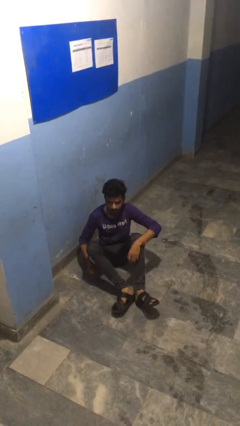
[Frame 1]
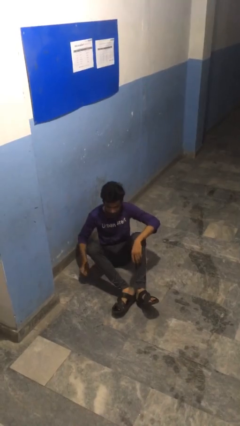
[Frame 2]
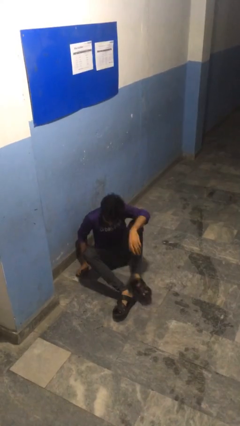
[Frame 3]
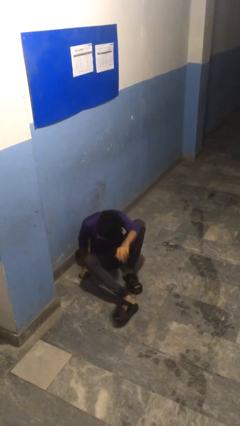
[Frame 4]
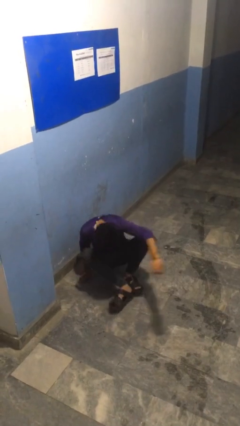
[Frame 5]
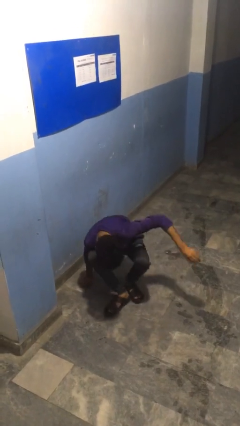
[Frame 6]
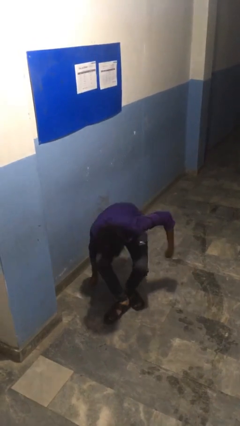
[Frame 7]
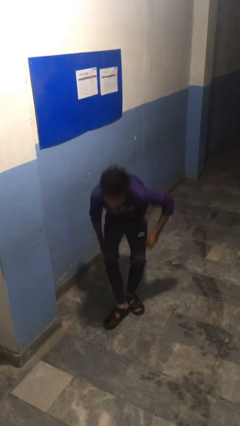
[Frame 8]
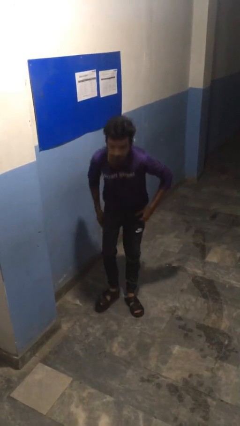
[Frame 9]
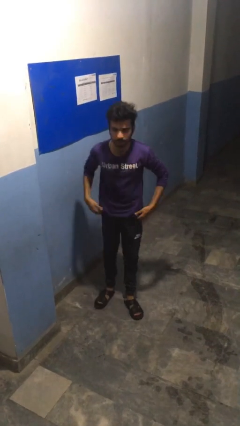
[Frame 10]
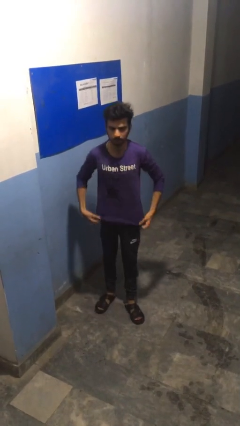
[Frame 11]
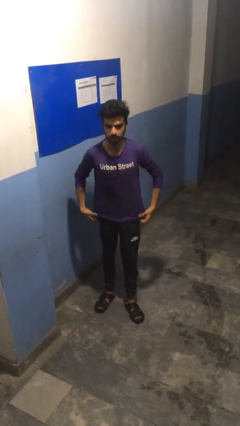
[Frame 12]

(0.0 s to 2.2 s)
person stands up from floor

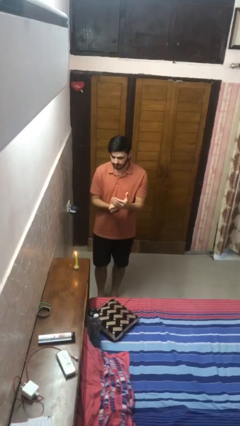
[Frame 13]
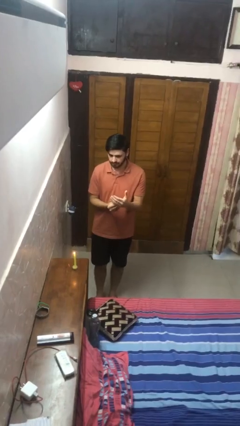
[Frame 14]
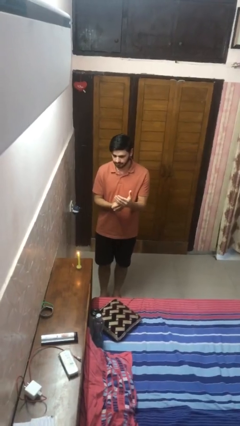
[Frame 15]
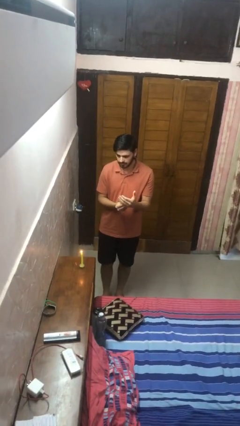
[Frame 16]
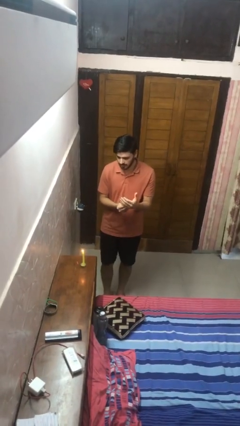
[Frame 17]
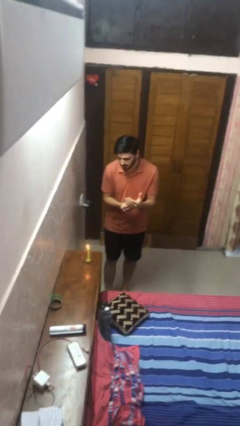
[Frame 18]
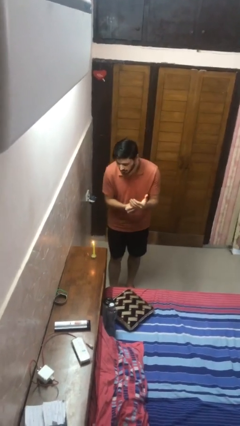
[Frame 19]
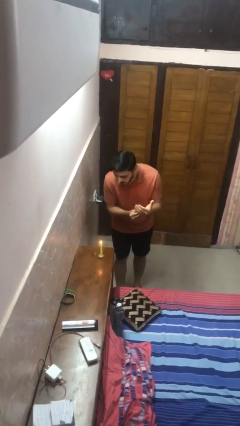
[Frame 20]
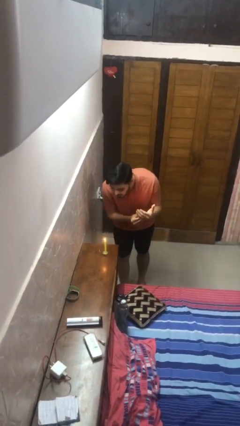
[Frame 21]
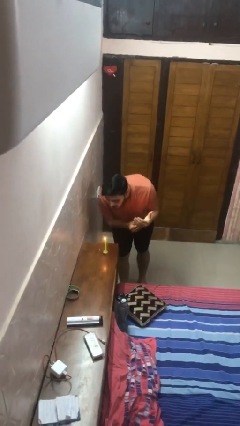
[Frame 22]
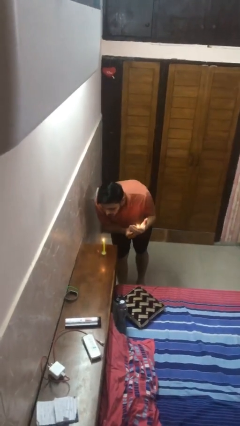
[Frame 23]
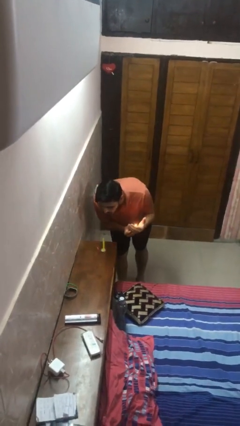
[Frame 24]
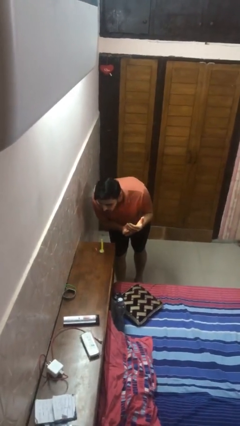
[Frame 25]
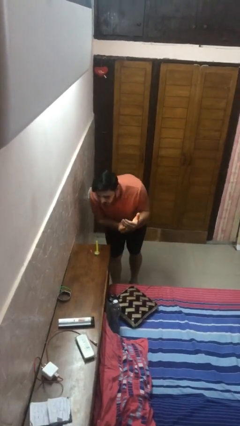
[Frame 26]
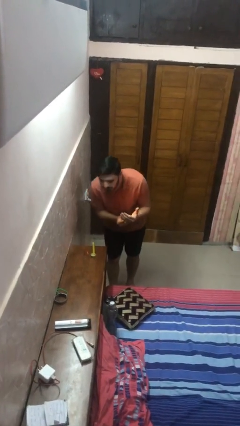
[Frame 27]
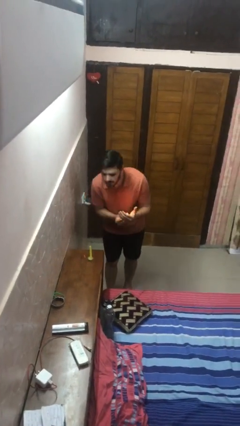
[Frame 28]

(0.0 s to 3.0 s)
person extinguishes candle

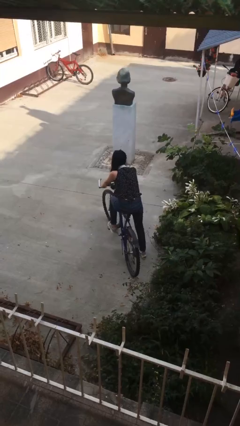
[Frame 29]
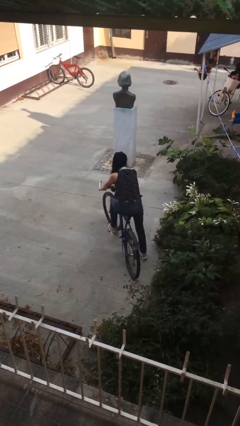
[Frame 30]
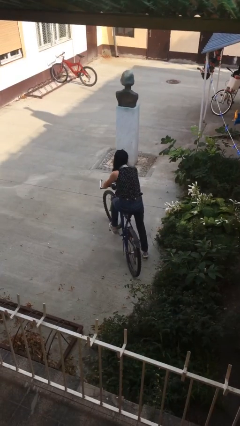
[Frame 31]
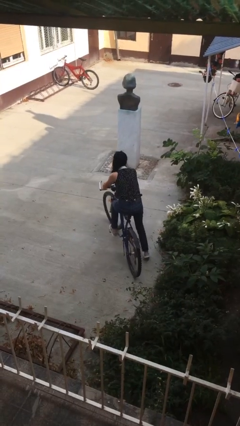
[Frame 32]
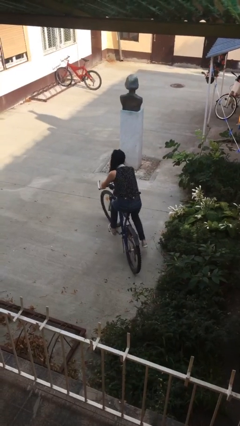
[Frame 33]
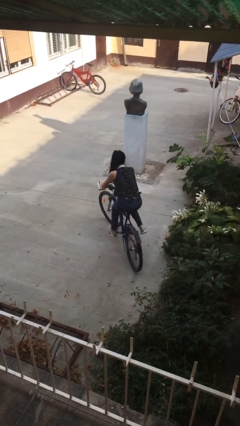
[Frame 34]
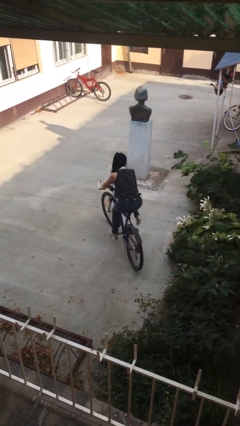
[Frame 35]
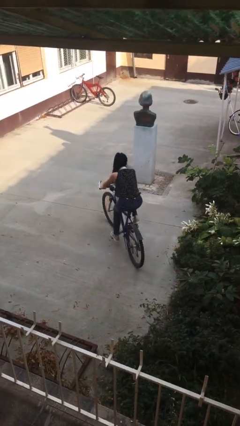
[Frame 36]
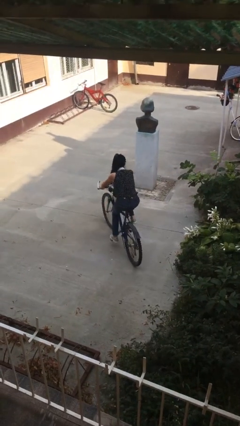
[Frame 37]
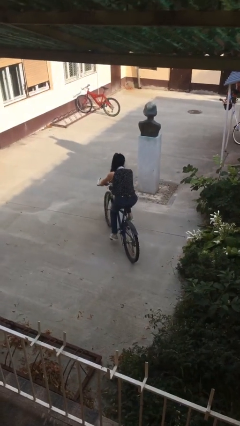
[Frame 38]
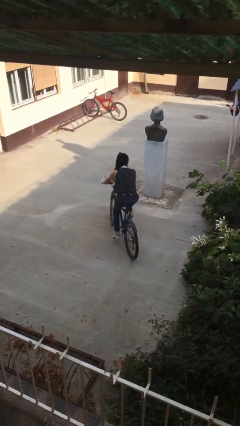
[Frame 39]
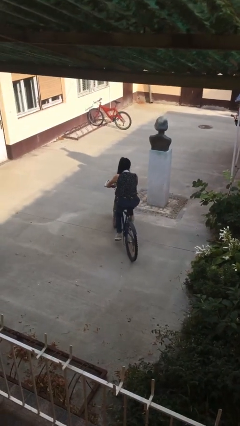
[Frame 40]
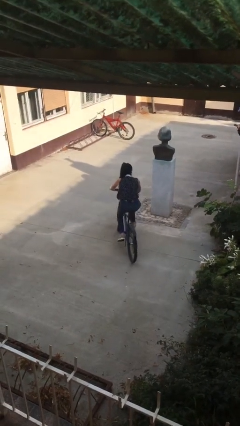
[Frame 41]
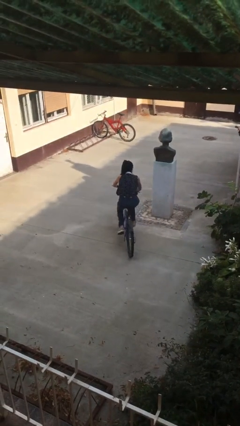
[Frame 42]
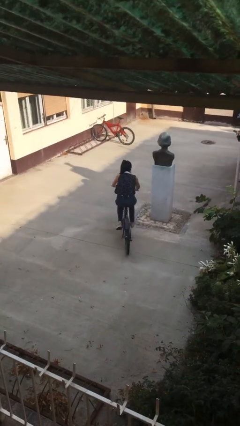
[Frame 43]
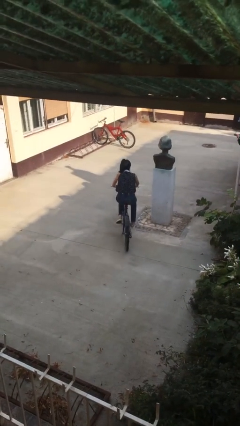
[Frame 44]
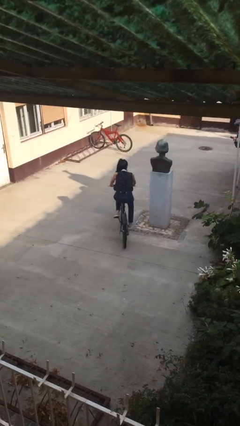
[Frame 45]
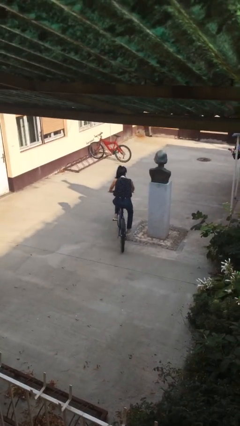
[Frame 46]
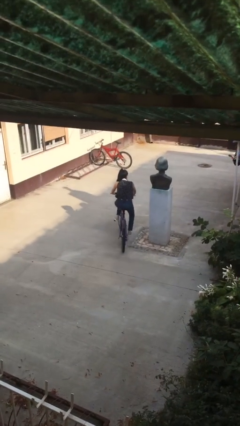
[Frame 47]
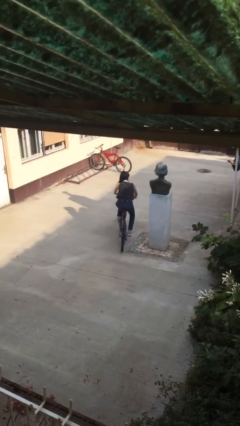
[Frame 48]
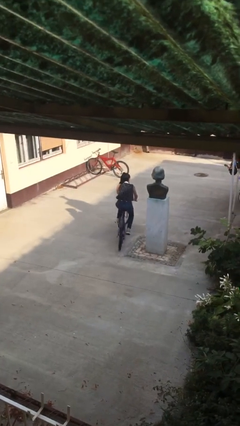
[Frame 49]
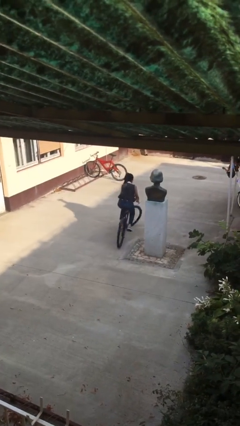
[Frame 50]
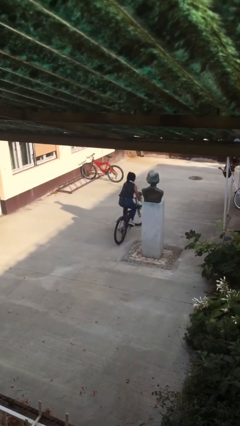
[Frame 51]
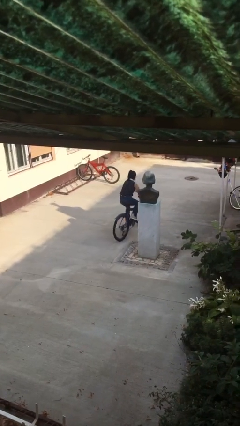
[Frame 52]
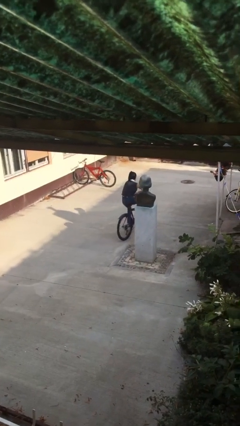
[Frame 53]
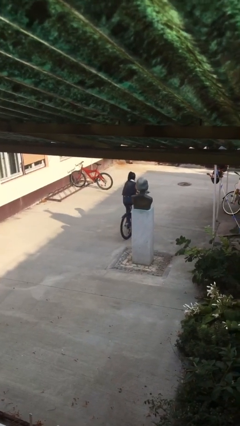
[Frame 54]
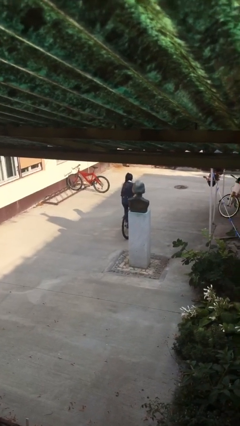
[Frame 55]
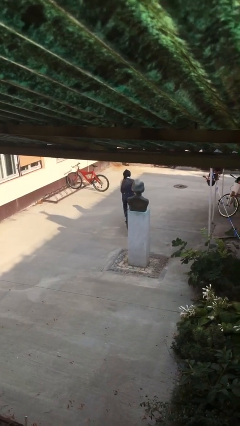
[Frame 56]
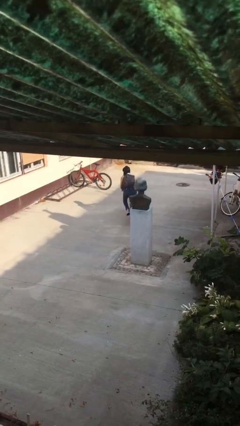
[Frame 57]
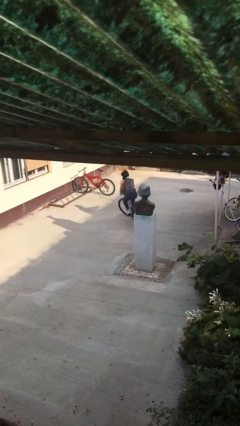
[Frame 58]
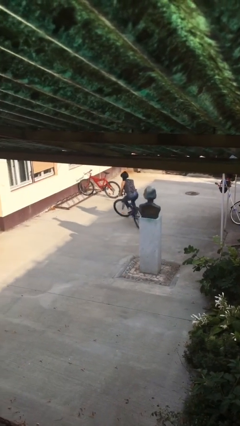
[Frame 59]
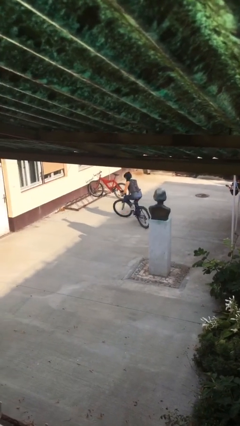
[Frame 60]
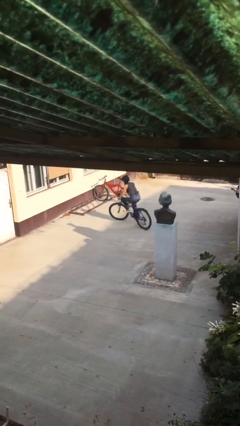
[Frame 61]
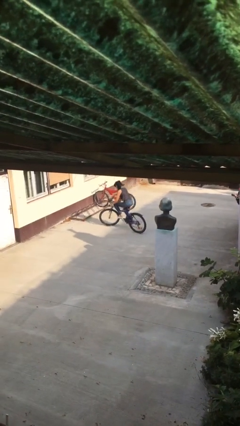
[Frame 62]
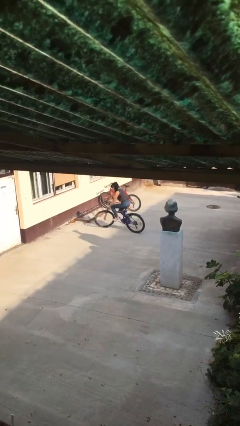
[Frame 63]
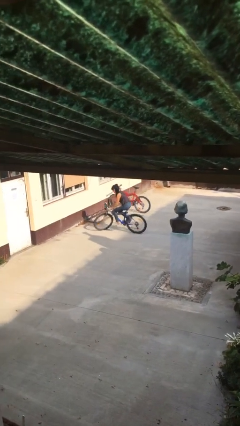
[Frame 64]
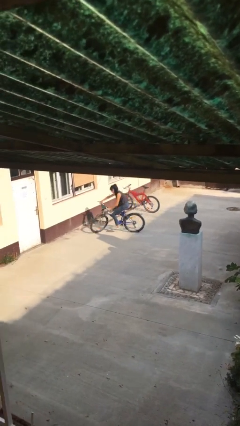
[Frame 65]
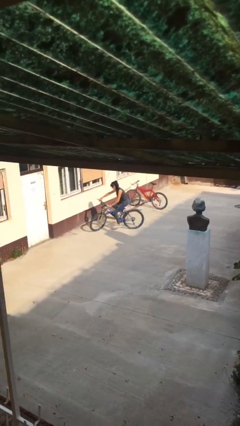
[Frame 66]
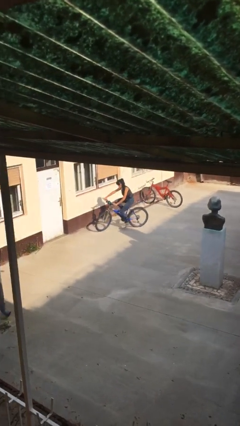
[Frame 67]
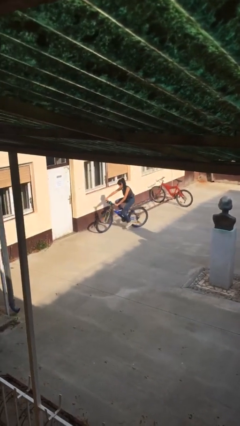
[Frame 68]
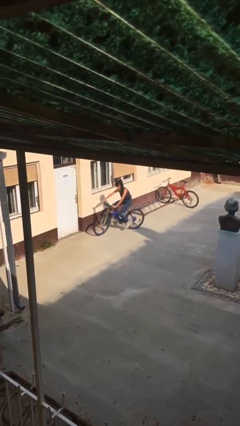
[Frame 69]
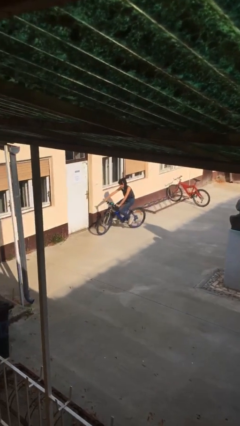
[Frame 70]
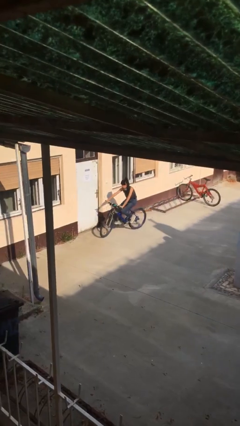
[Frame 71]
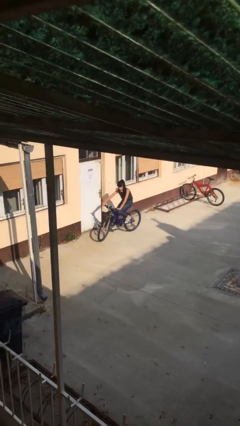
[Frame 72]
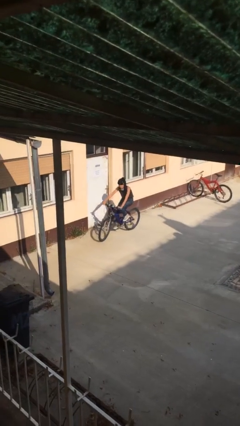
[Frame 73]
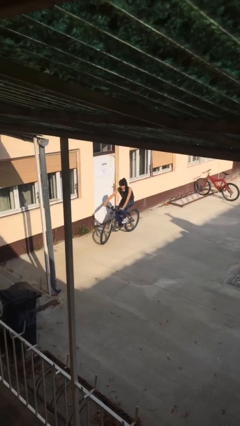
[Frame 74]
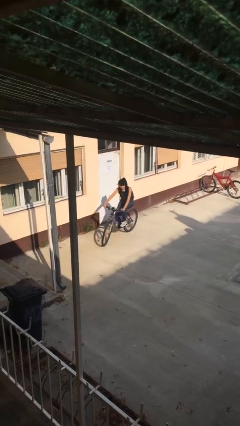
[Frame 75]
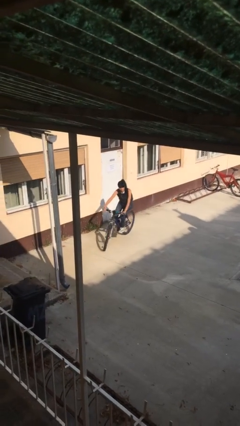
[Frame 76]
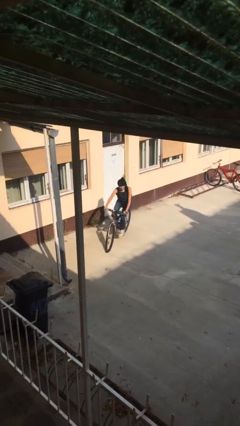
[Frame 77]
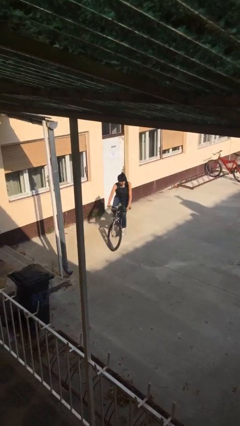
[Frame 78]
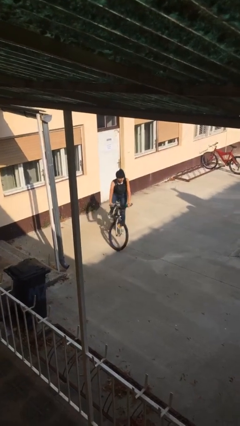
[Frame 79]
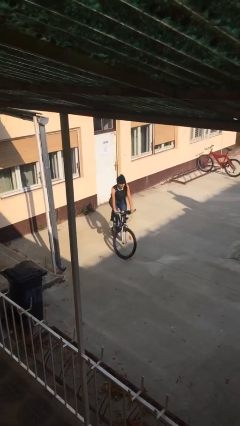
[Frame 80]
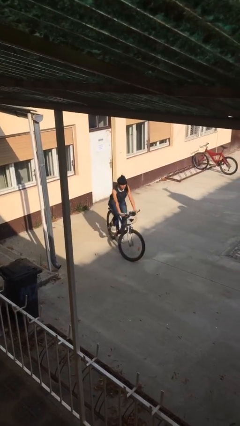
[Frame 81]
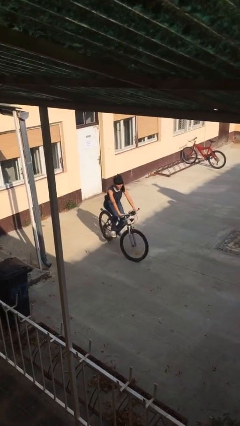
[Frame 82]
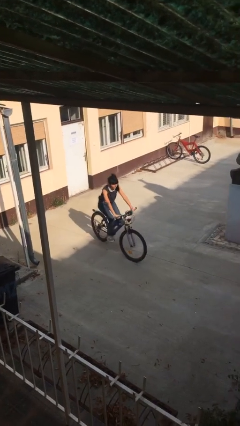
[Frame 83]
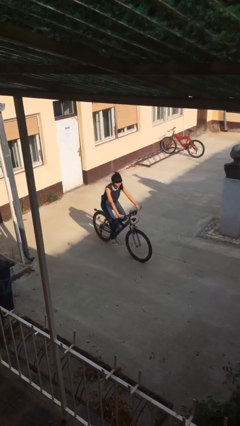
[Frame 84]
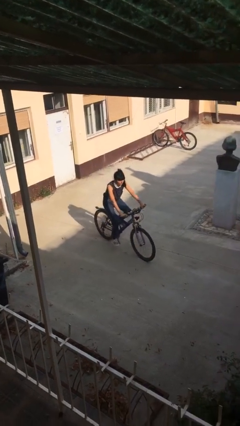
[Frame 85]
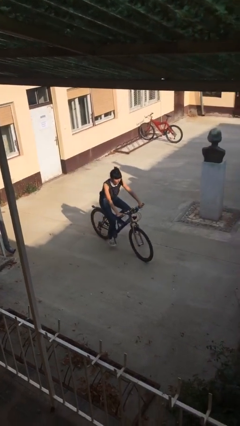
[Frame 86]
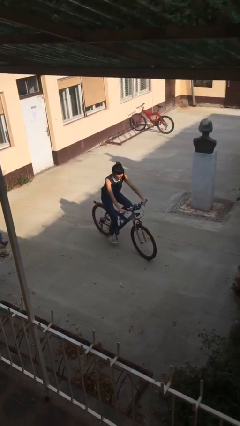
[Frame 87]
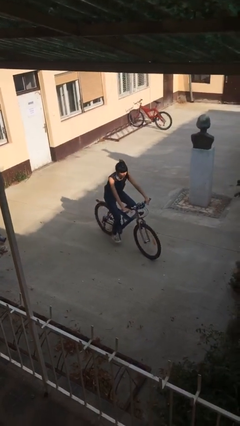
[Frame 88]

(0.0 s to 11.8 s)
person rides bicycle

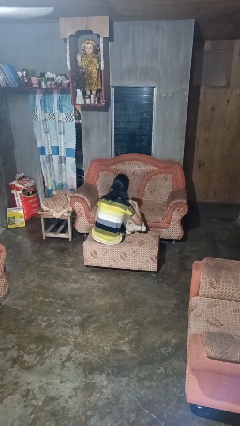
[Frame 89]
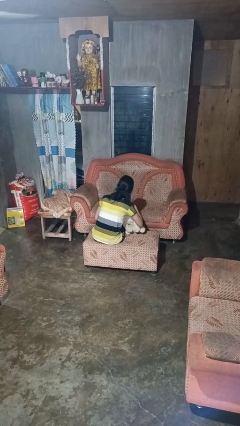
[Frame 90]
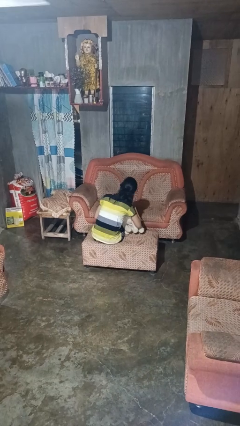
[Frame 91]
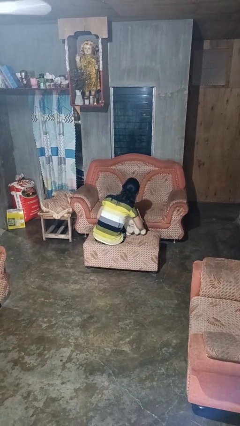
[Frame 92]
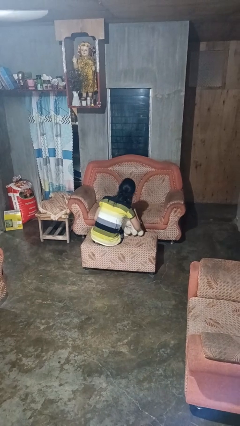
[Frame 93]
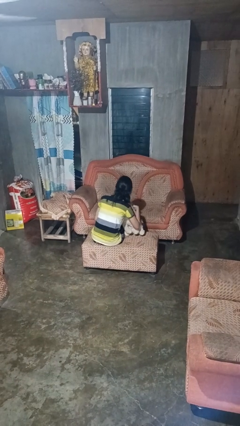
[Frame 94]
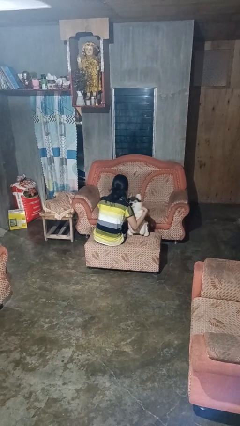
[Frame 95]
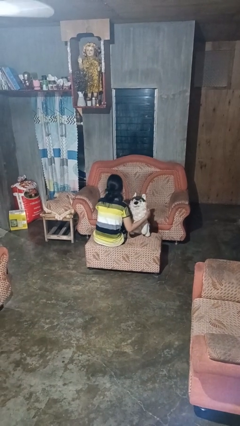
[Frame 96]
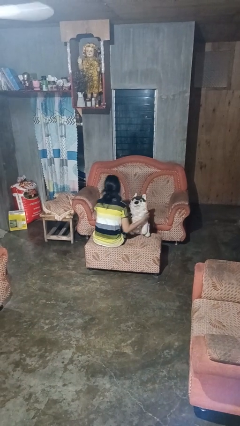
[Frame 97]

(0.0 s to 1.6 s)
person hugs stuffed animal
